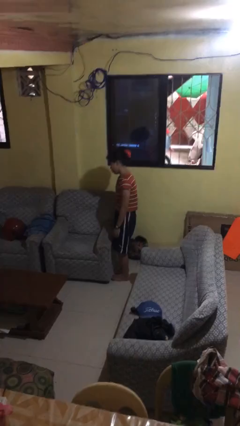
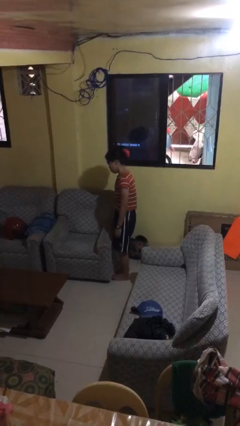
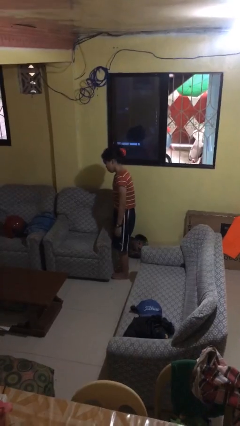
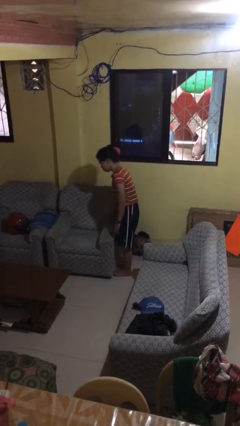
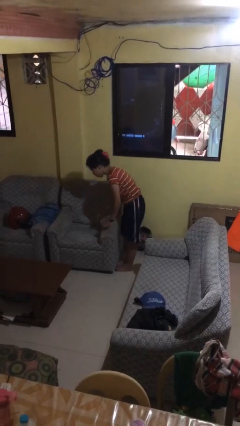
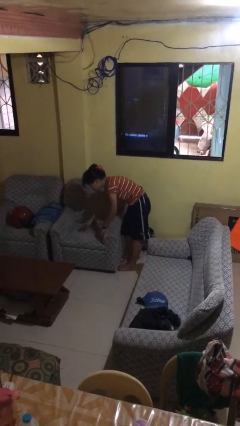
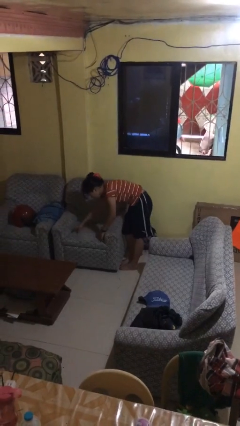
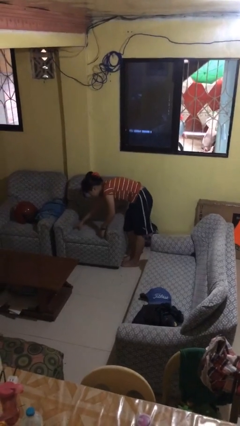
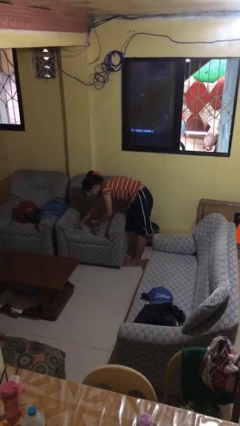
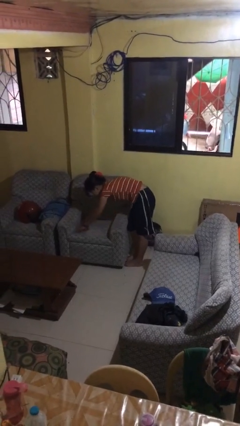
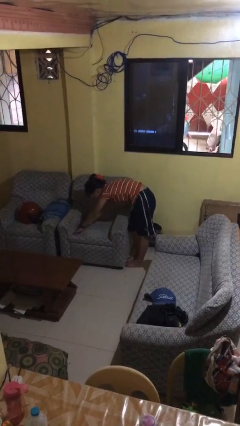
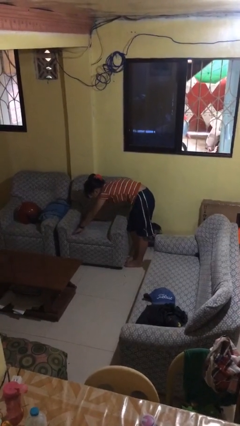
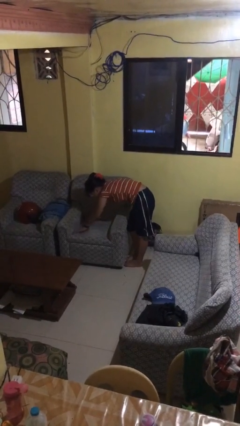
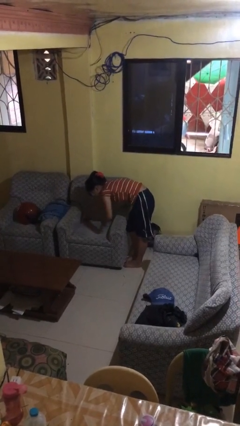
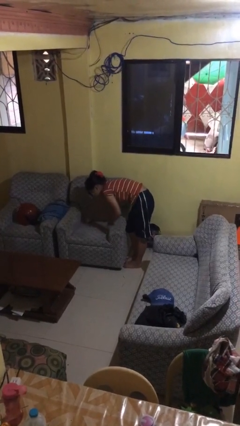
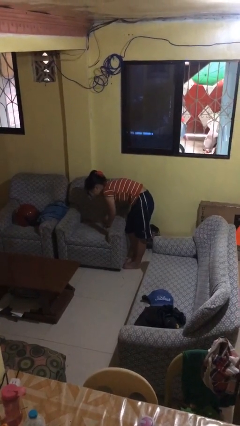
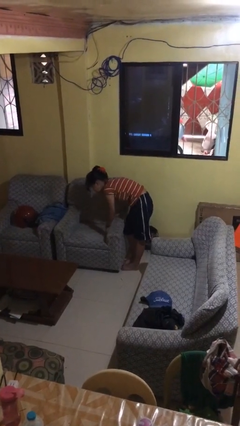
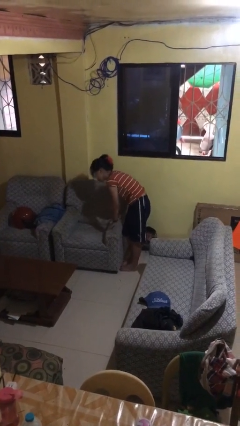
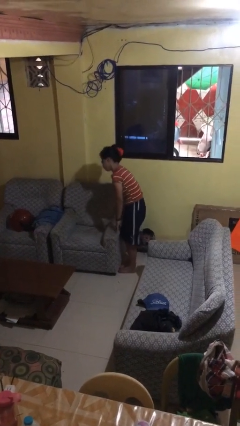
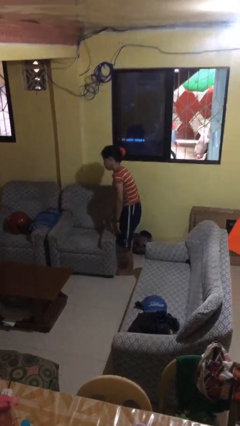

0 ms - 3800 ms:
person searches in couch

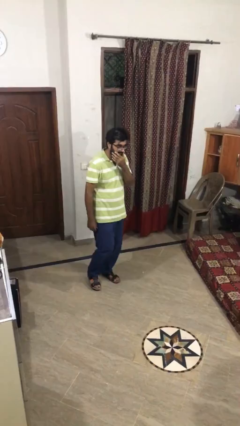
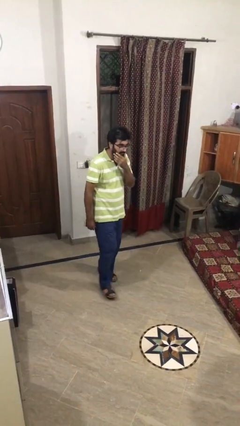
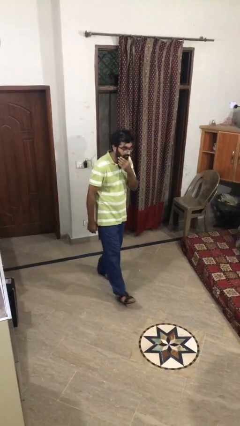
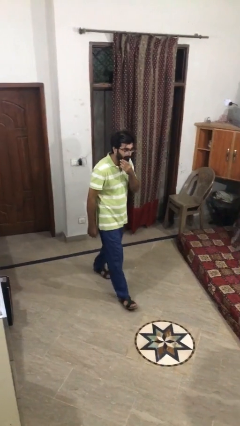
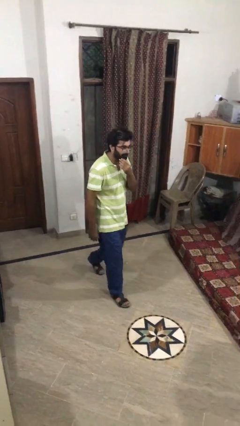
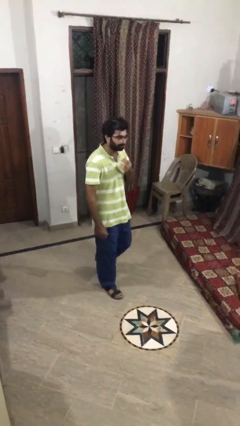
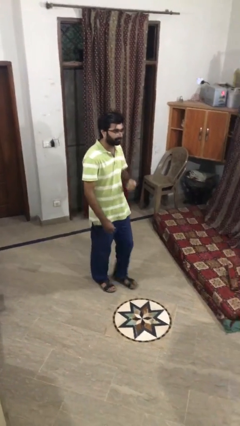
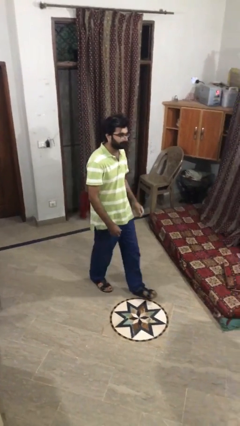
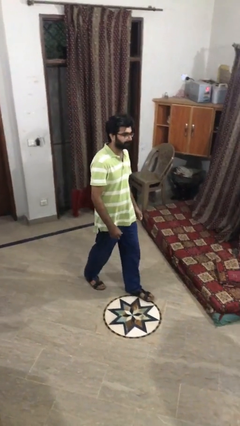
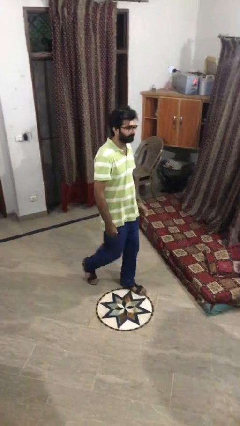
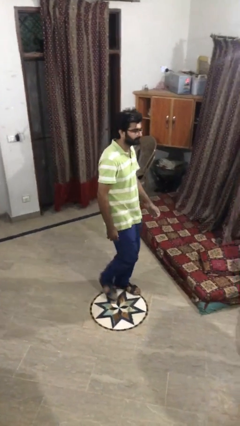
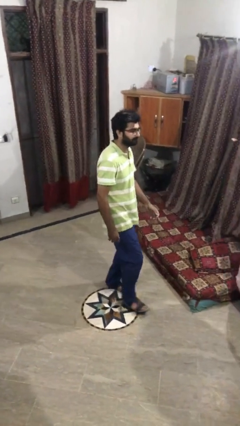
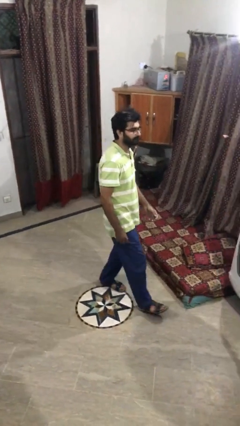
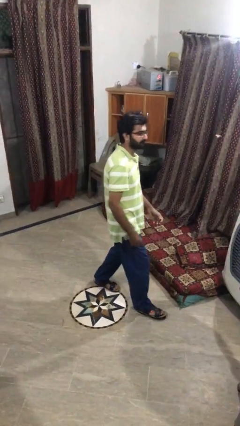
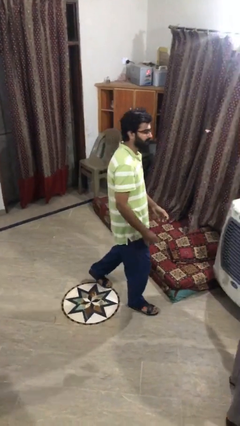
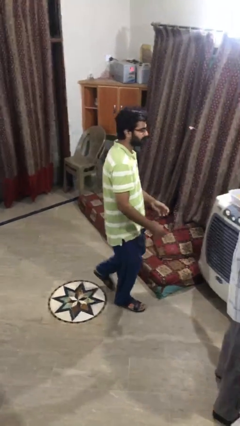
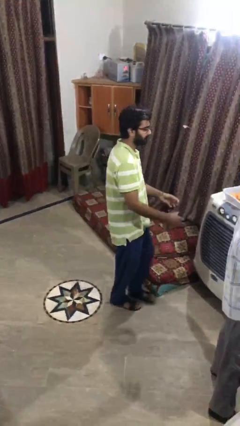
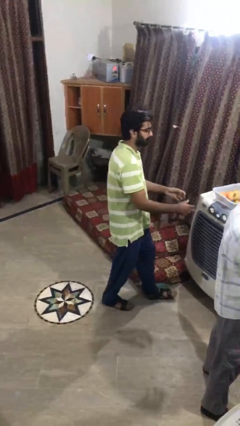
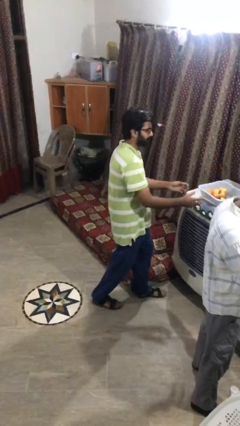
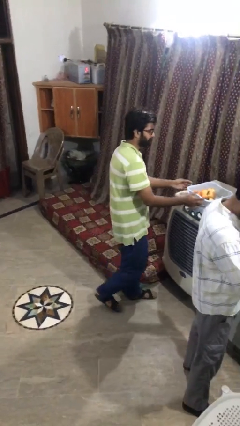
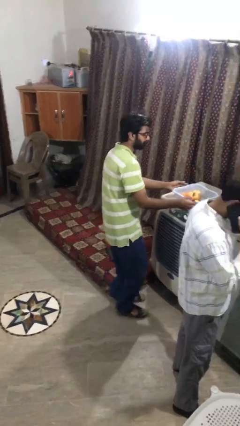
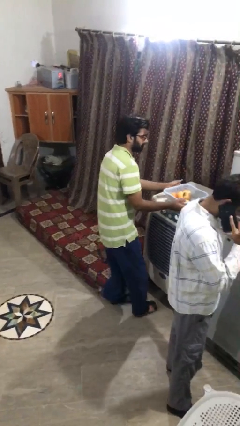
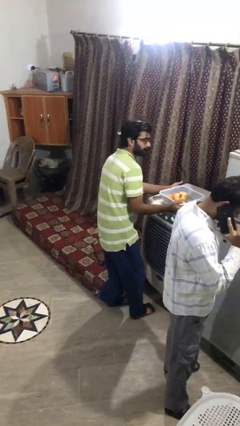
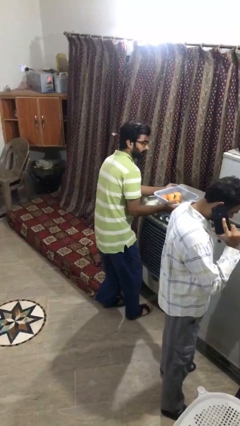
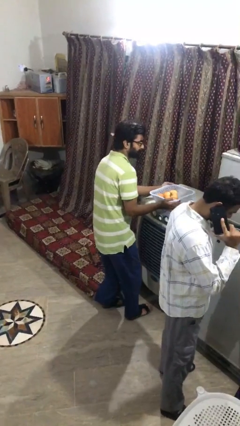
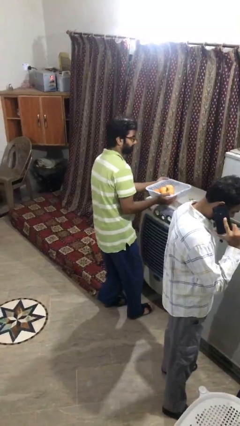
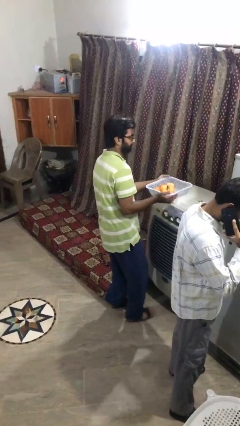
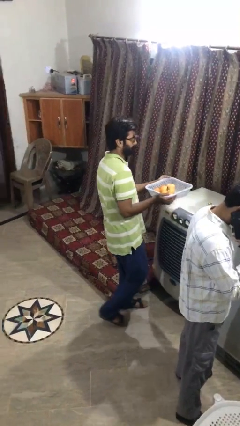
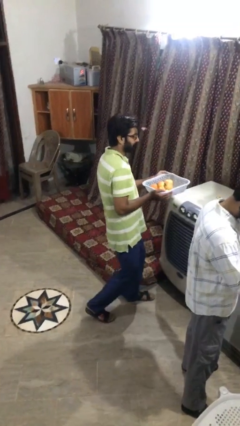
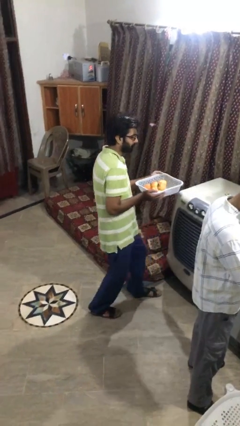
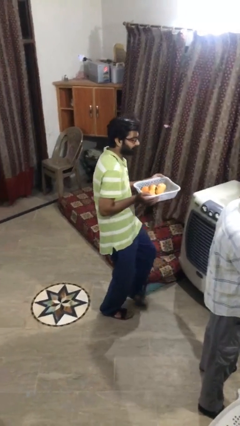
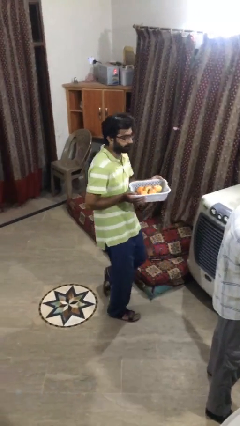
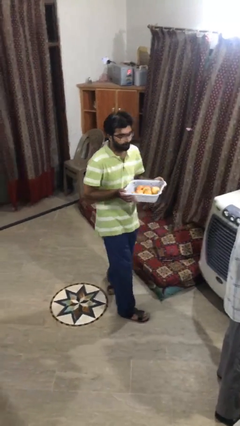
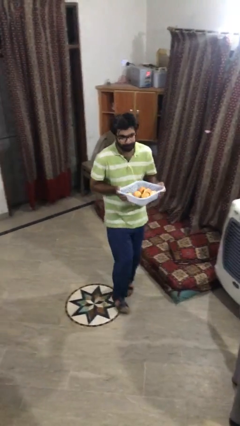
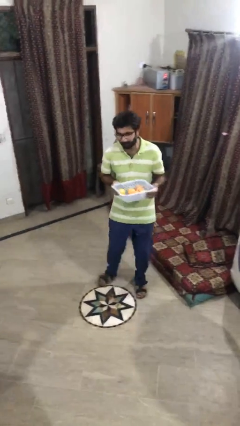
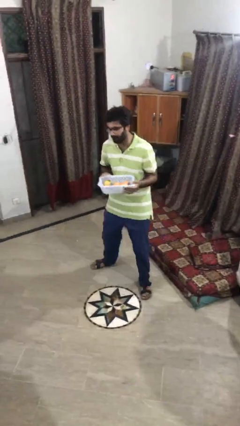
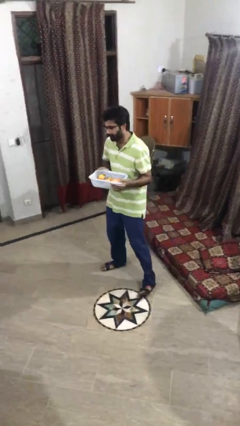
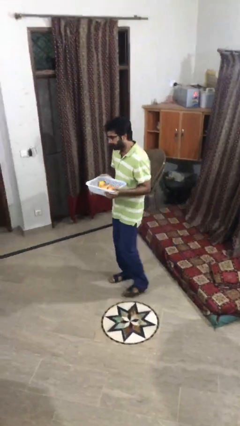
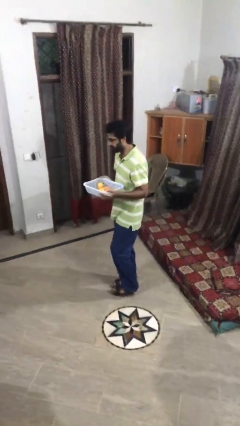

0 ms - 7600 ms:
person steals object from person

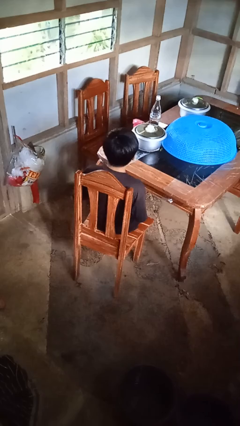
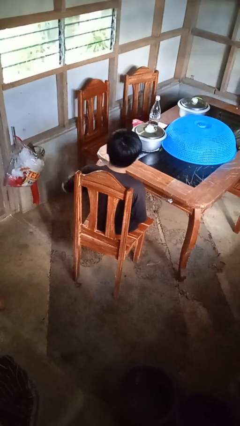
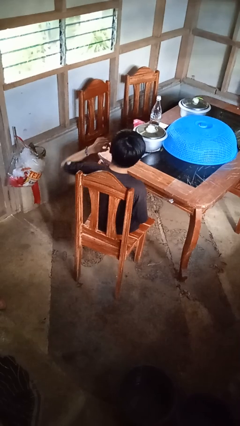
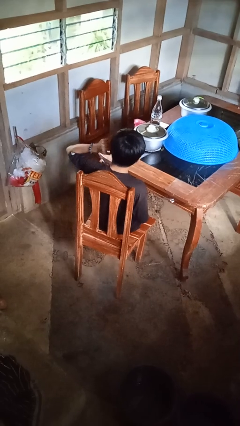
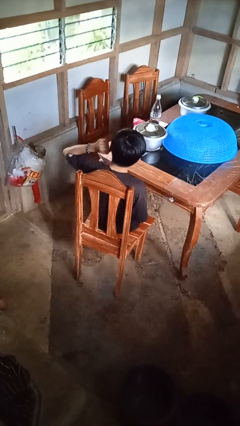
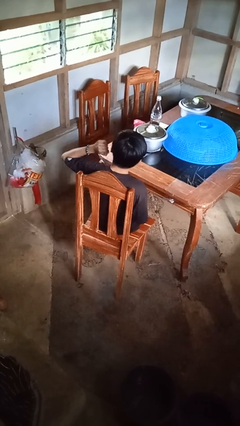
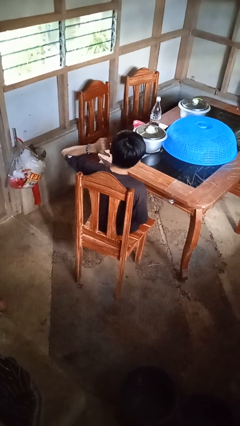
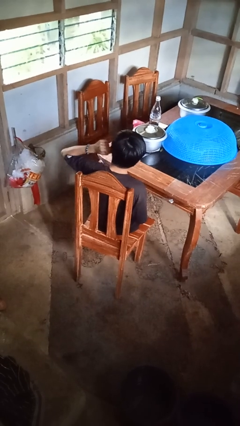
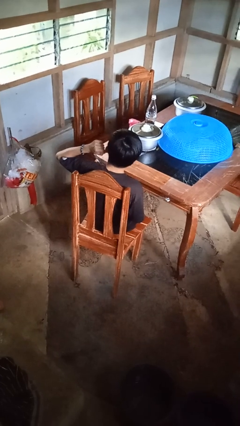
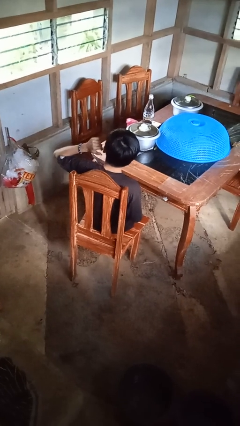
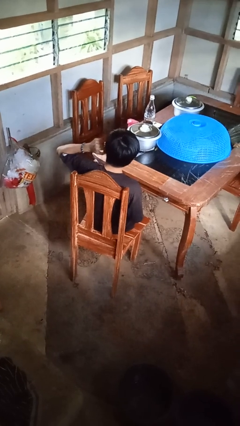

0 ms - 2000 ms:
person touches earlobe

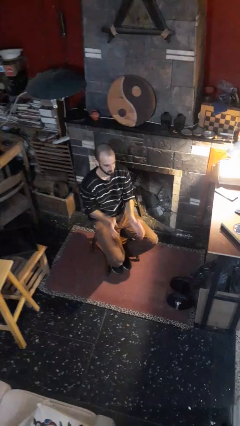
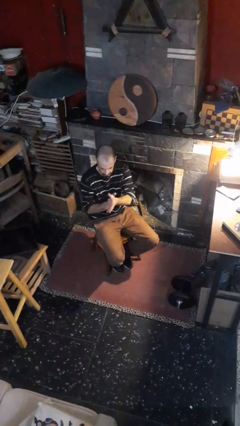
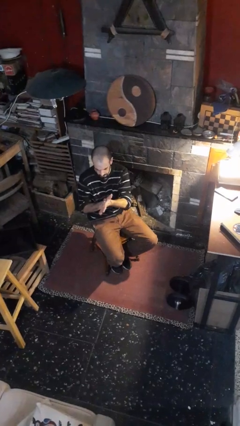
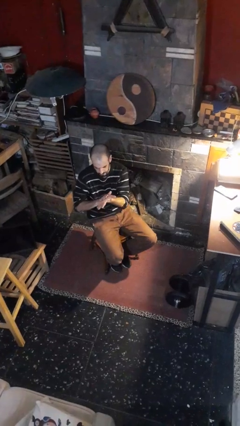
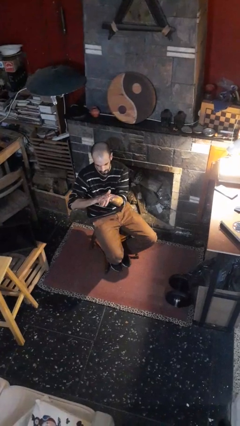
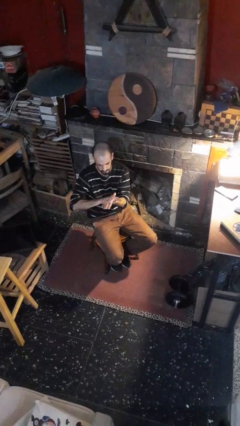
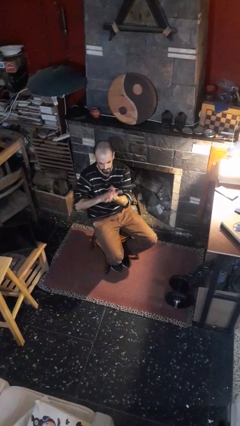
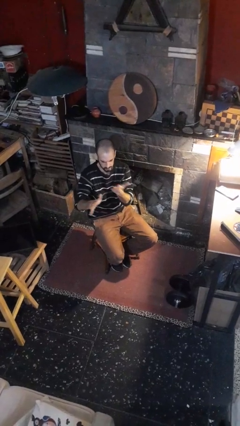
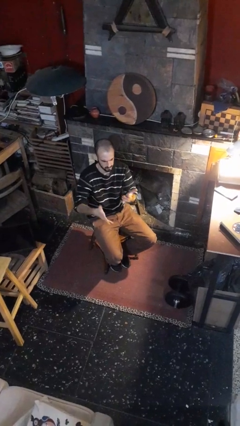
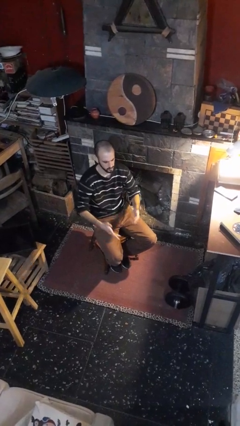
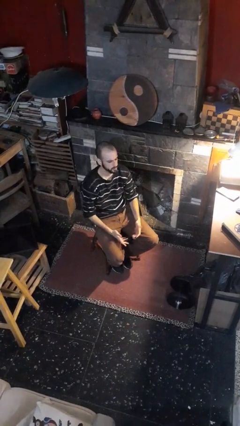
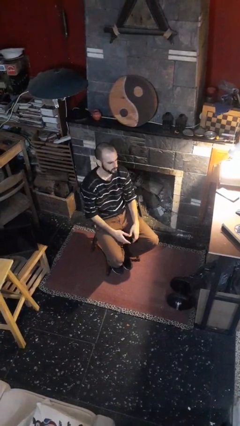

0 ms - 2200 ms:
person swats bug

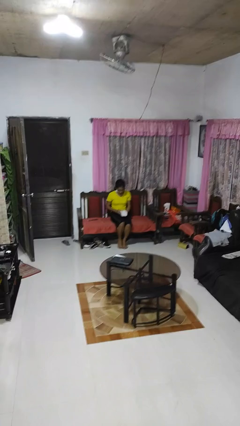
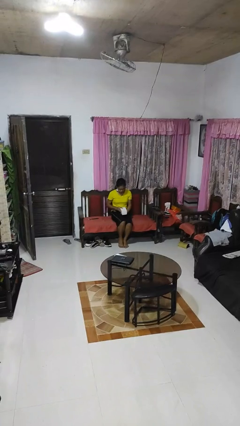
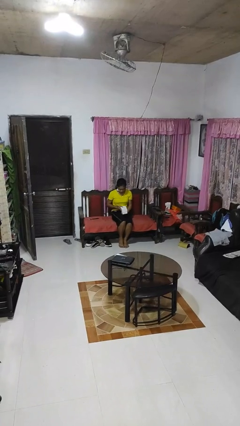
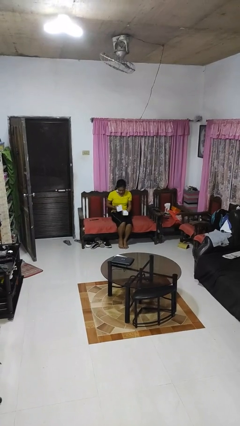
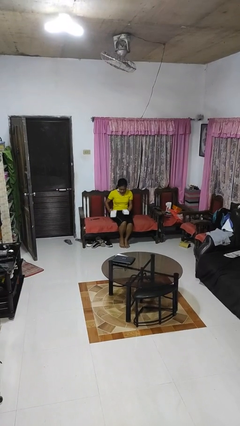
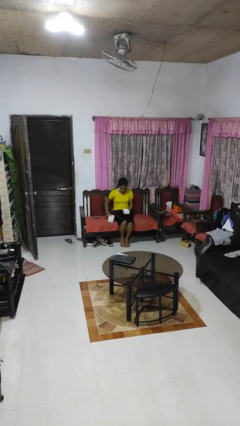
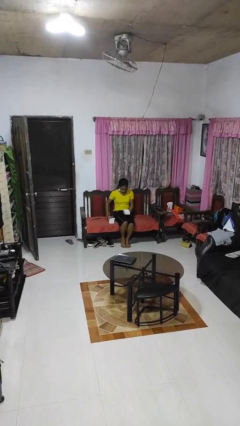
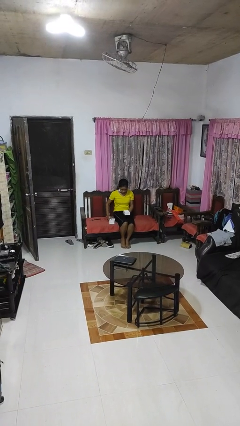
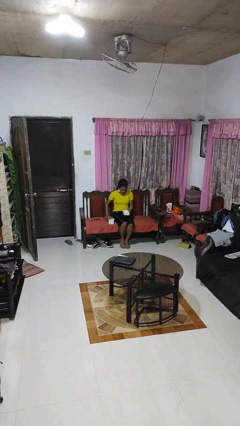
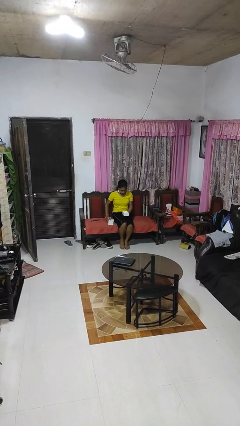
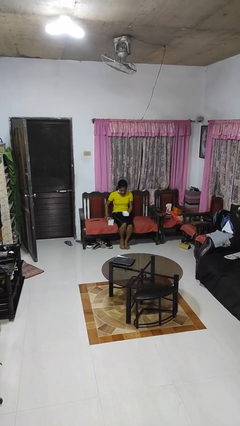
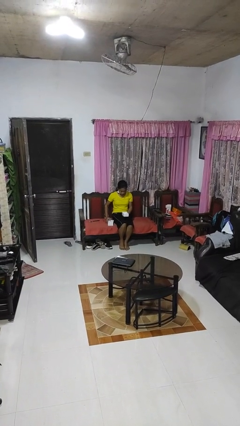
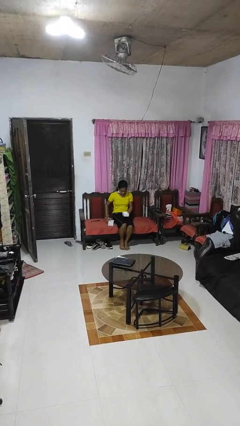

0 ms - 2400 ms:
person opens jewelry box
